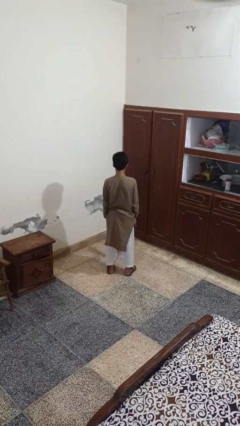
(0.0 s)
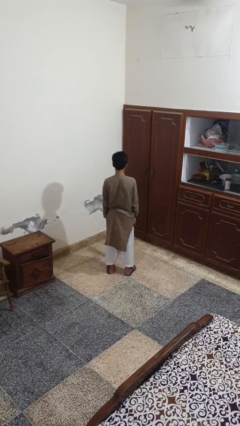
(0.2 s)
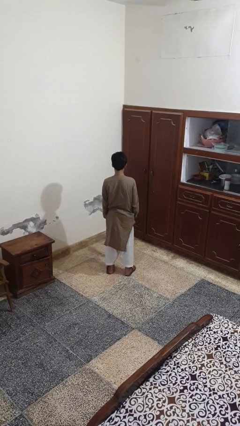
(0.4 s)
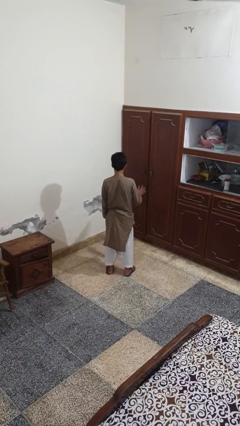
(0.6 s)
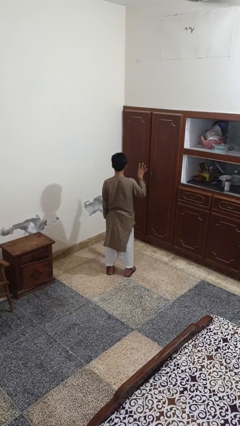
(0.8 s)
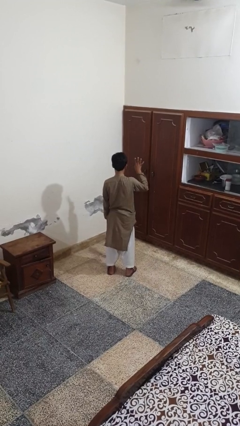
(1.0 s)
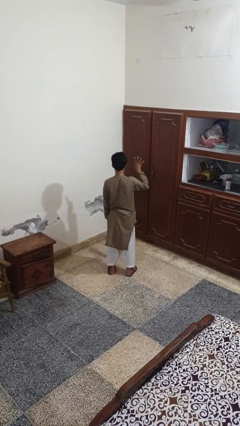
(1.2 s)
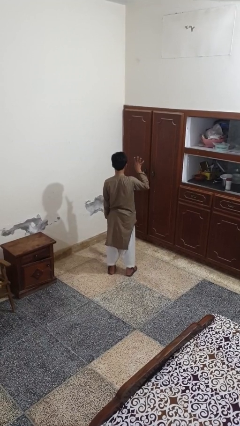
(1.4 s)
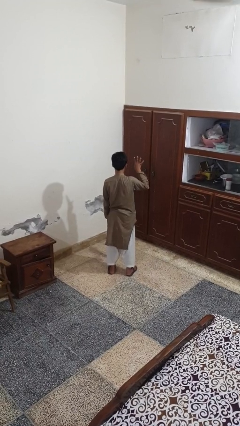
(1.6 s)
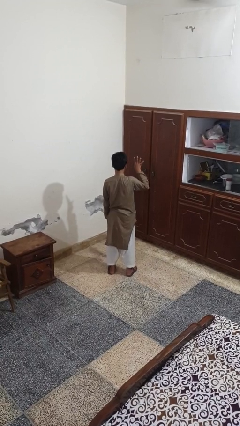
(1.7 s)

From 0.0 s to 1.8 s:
person gestures number four

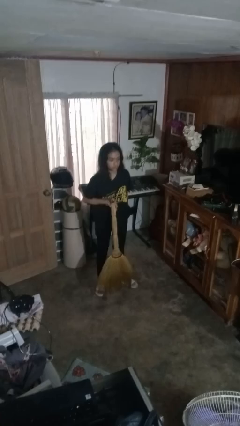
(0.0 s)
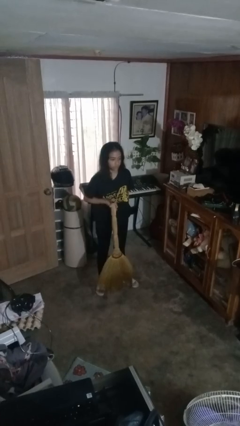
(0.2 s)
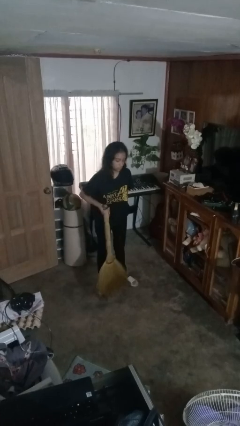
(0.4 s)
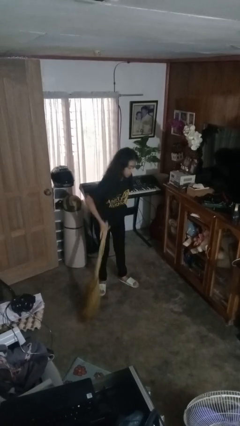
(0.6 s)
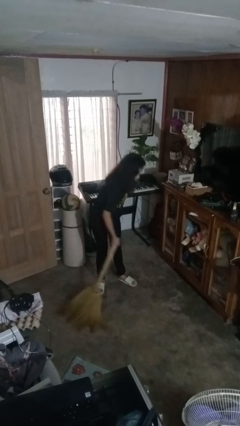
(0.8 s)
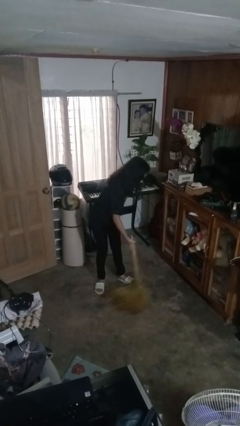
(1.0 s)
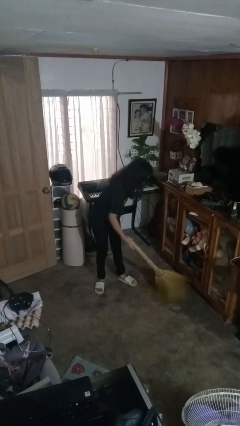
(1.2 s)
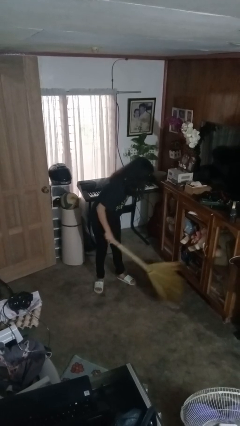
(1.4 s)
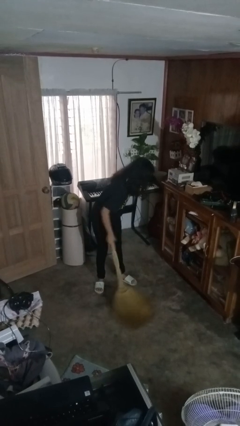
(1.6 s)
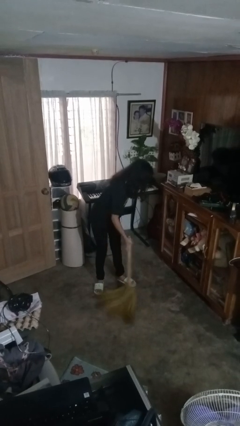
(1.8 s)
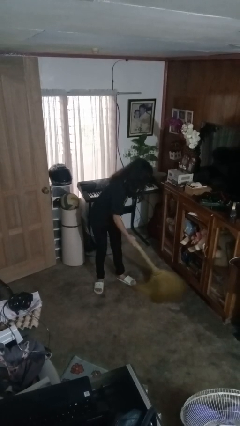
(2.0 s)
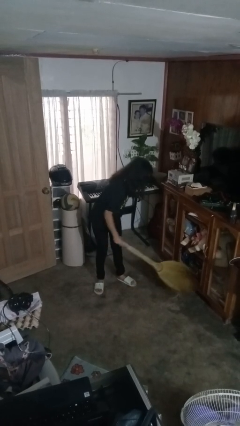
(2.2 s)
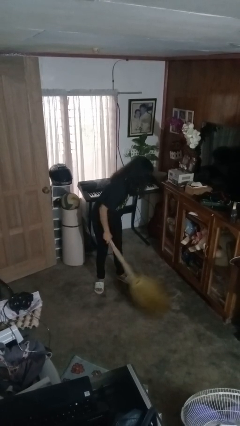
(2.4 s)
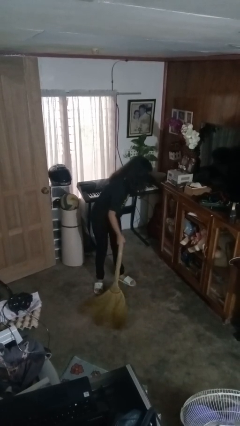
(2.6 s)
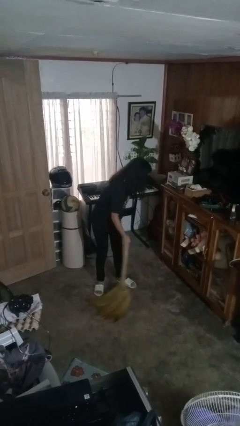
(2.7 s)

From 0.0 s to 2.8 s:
person sweeps floor

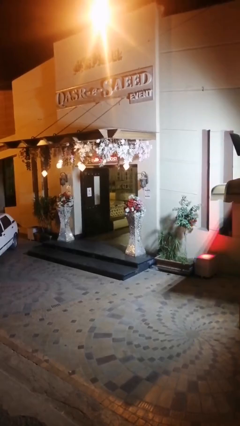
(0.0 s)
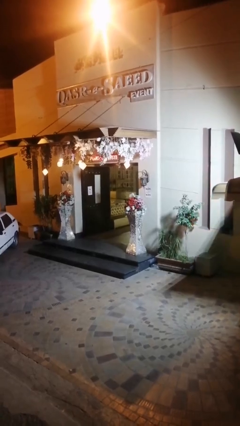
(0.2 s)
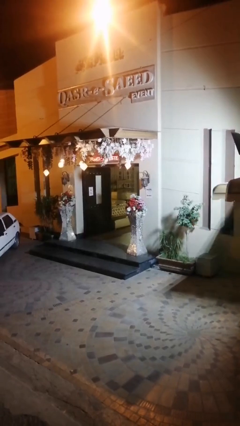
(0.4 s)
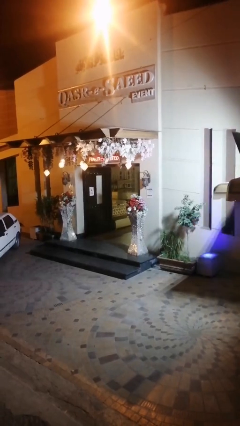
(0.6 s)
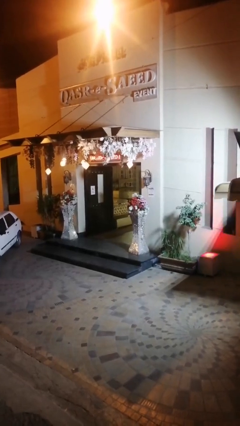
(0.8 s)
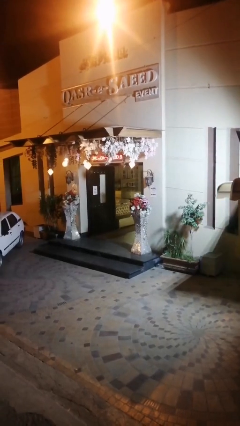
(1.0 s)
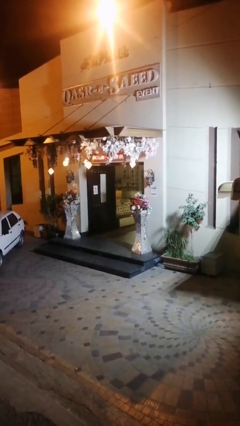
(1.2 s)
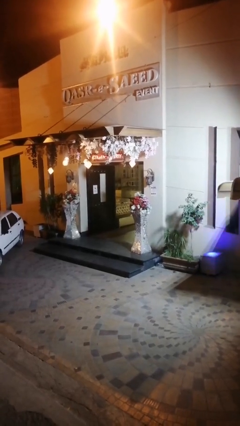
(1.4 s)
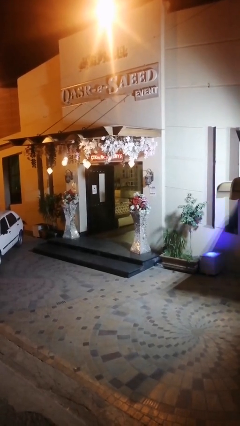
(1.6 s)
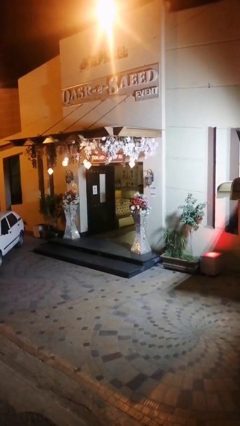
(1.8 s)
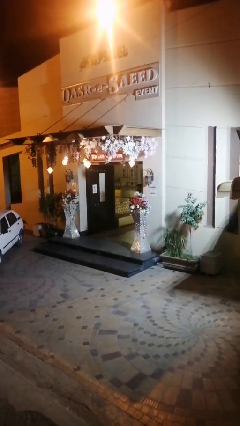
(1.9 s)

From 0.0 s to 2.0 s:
person exits scene through structure

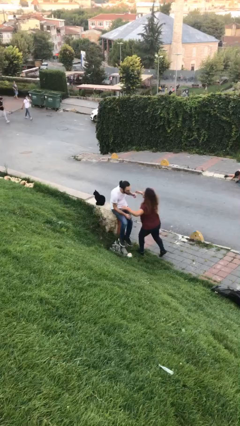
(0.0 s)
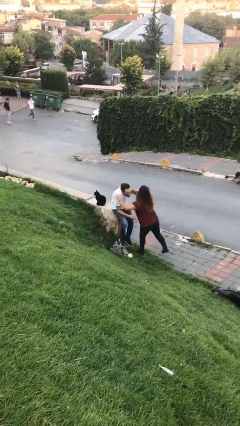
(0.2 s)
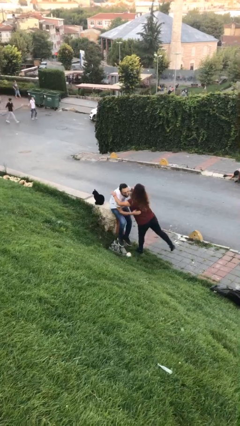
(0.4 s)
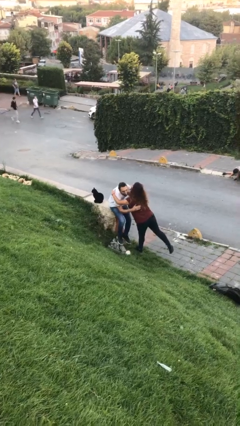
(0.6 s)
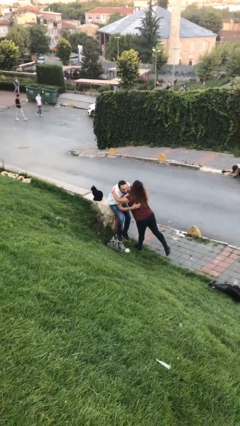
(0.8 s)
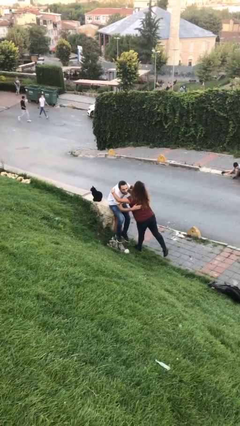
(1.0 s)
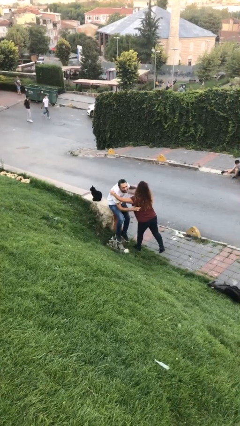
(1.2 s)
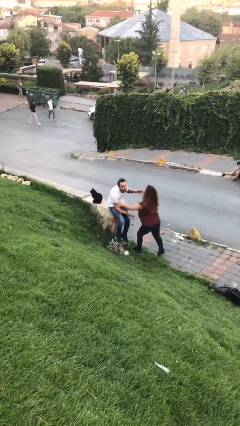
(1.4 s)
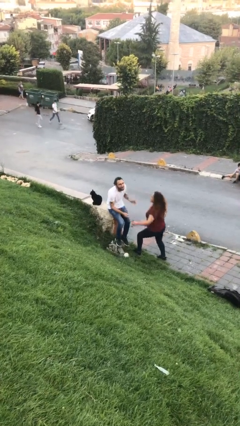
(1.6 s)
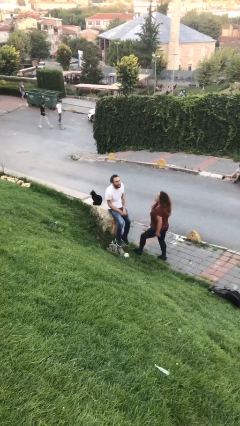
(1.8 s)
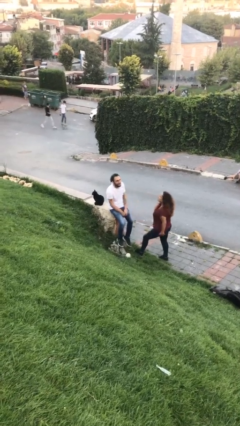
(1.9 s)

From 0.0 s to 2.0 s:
person embraces person

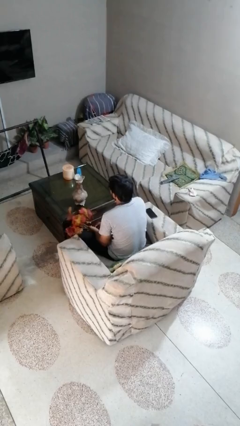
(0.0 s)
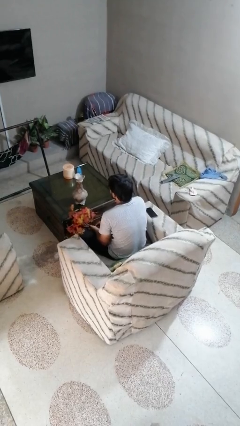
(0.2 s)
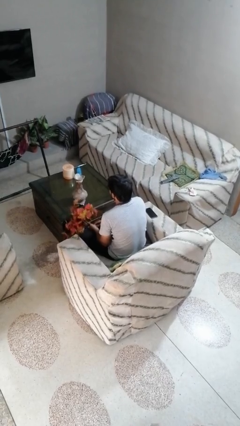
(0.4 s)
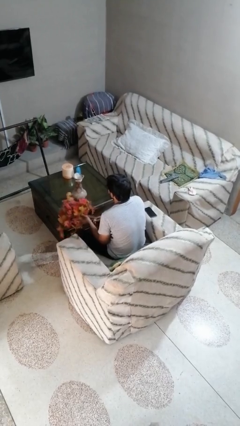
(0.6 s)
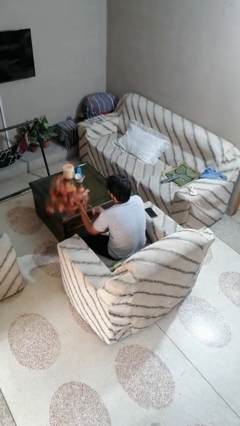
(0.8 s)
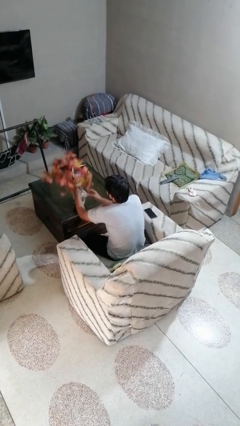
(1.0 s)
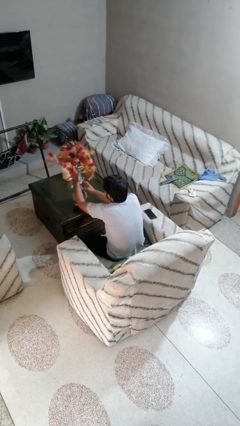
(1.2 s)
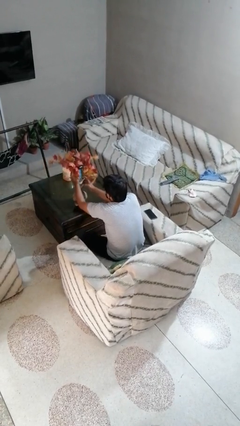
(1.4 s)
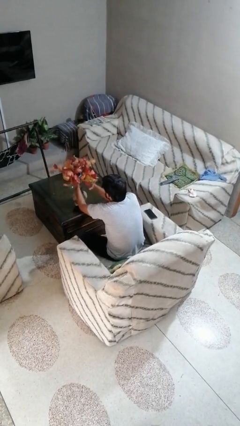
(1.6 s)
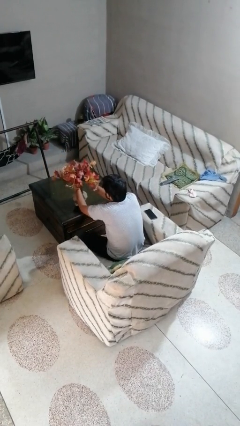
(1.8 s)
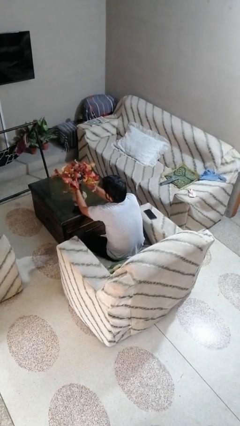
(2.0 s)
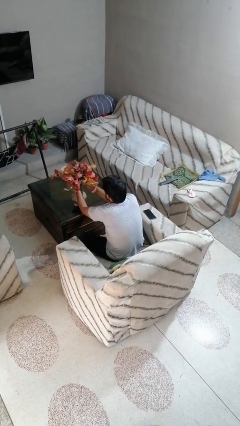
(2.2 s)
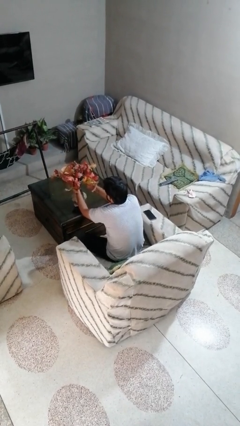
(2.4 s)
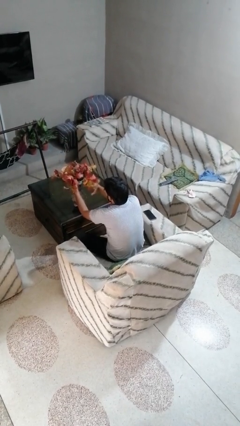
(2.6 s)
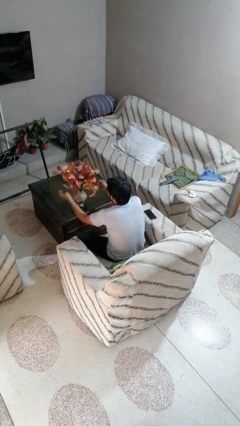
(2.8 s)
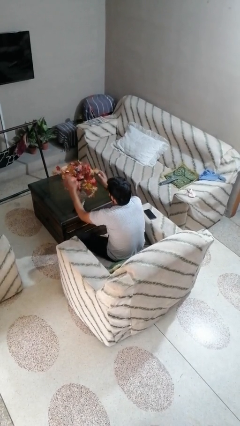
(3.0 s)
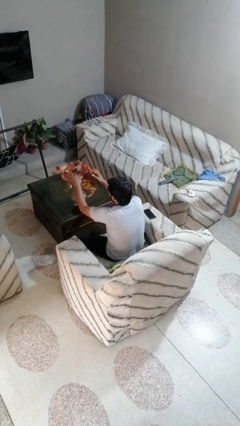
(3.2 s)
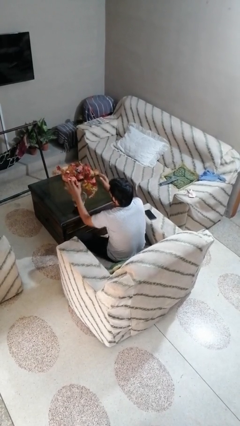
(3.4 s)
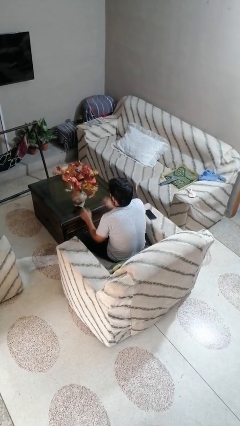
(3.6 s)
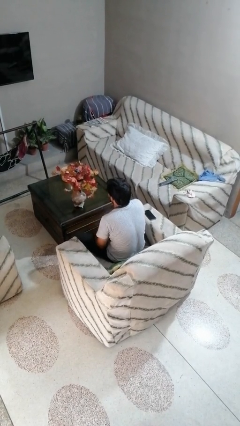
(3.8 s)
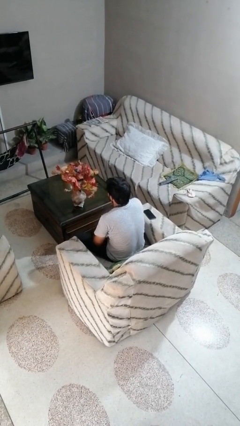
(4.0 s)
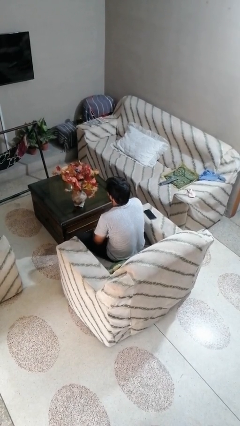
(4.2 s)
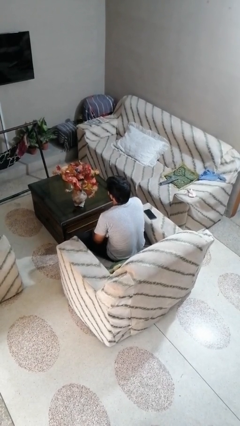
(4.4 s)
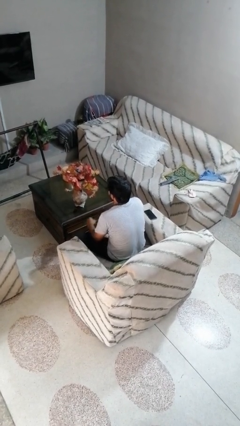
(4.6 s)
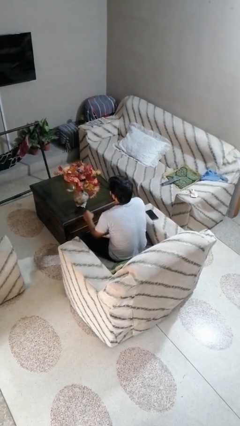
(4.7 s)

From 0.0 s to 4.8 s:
person arranges flowers in vase

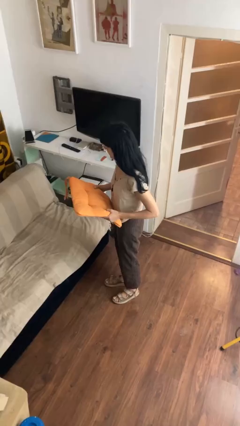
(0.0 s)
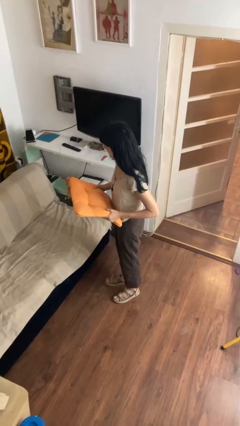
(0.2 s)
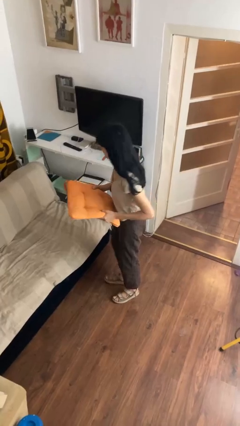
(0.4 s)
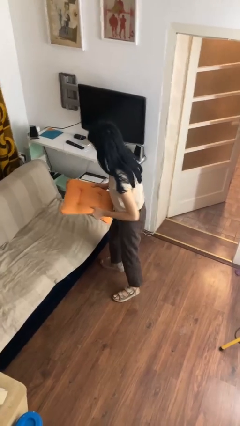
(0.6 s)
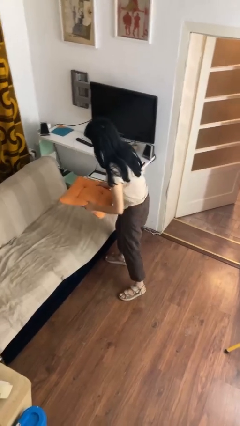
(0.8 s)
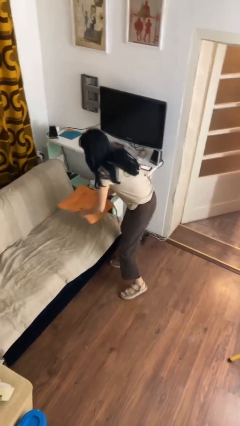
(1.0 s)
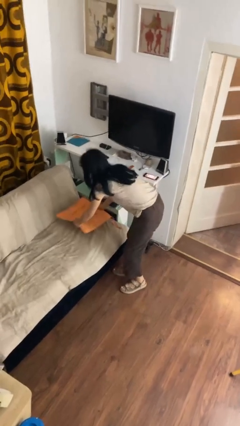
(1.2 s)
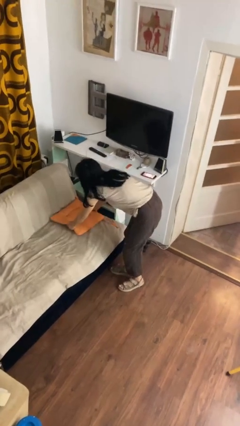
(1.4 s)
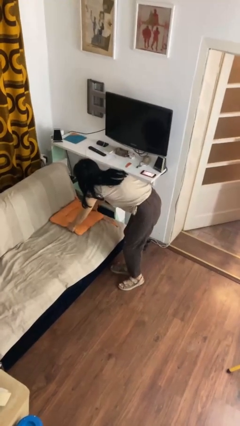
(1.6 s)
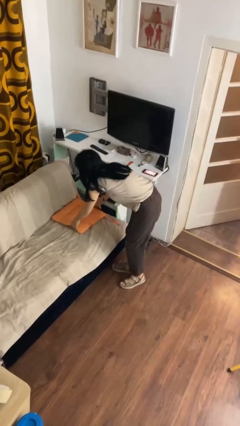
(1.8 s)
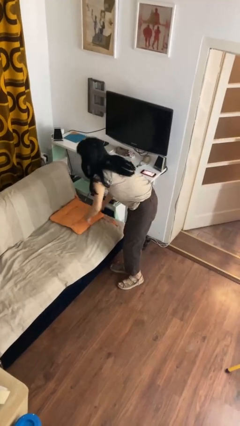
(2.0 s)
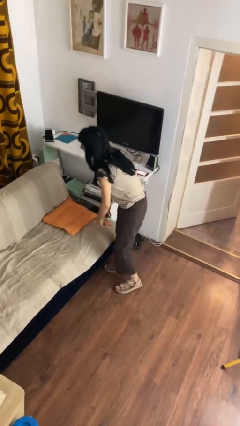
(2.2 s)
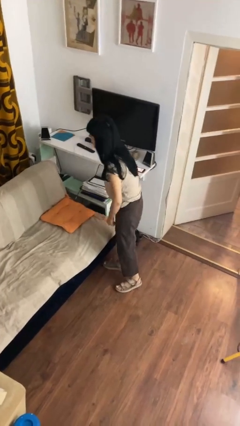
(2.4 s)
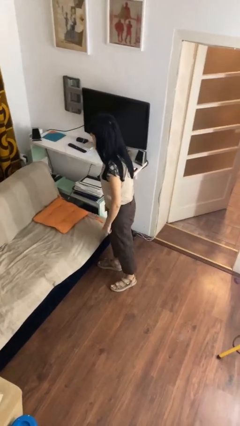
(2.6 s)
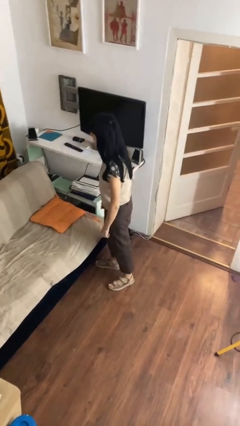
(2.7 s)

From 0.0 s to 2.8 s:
person puts down object on couch

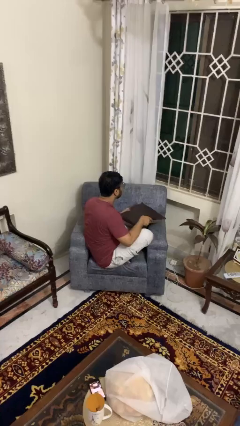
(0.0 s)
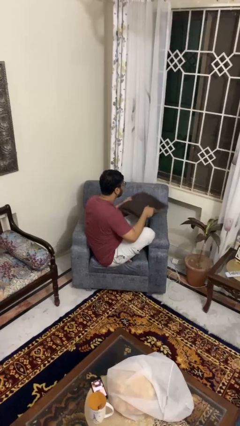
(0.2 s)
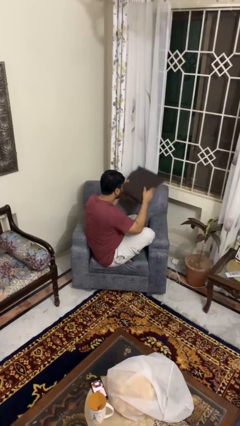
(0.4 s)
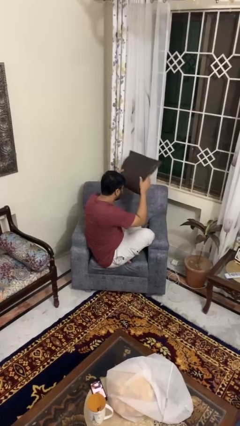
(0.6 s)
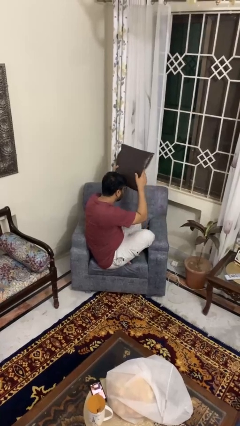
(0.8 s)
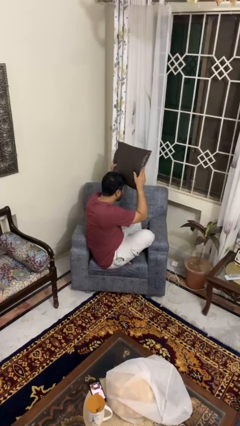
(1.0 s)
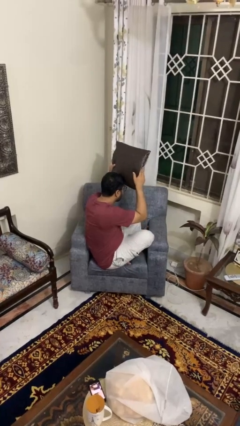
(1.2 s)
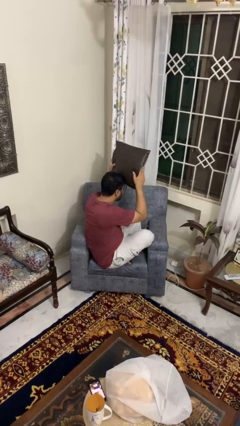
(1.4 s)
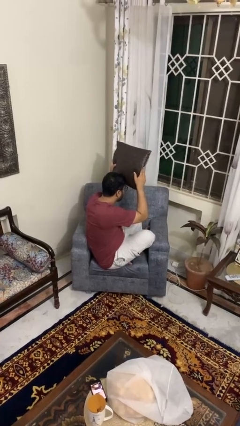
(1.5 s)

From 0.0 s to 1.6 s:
person holds object above head
